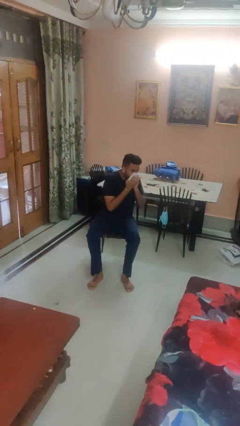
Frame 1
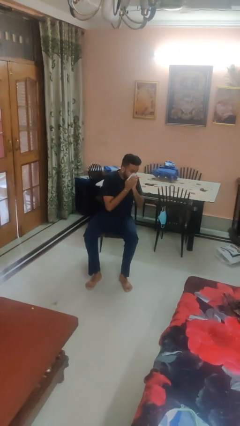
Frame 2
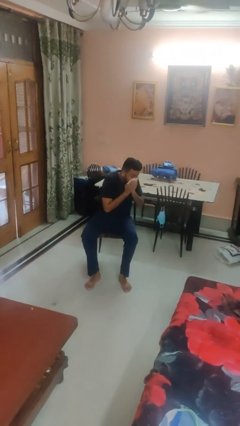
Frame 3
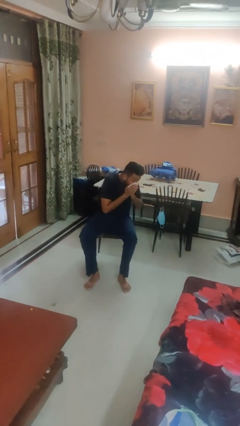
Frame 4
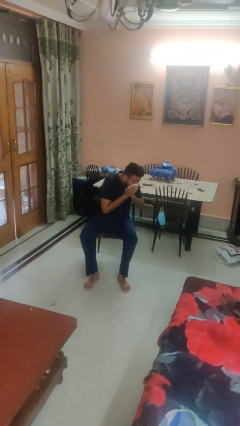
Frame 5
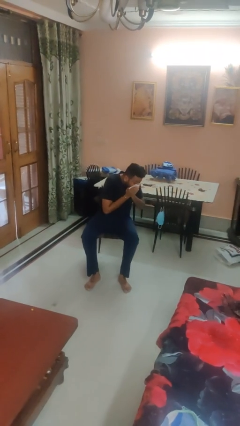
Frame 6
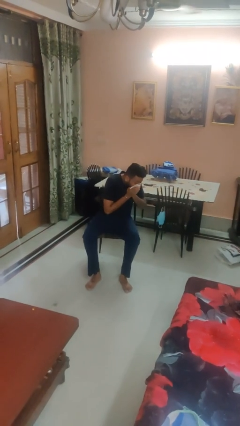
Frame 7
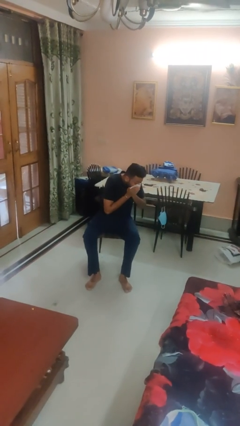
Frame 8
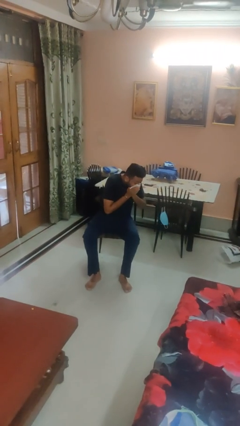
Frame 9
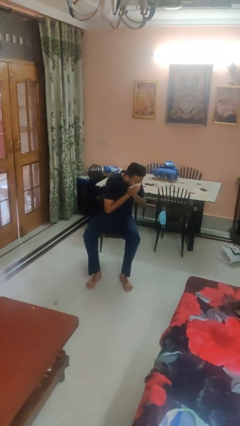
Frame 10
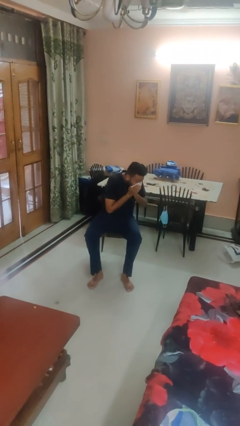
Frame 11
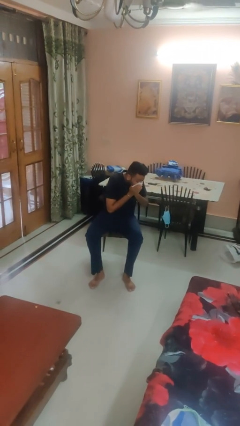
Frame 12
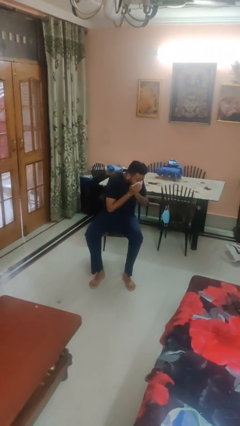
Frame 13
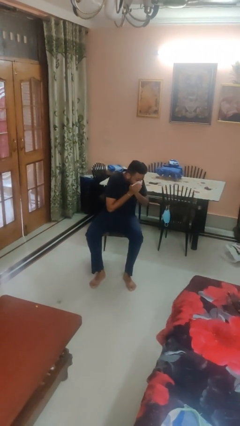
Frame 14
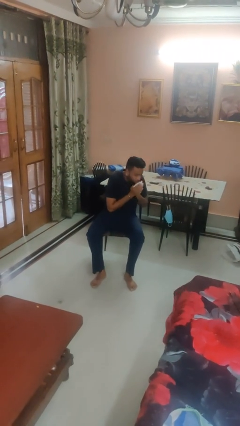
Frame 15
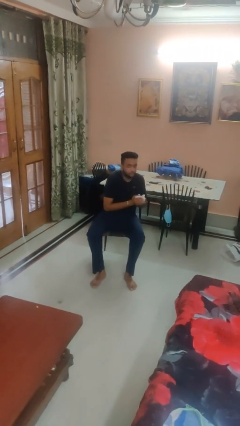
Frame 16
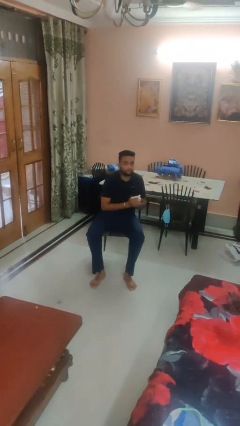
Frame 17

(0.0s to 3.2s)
person blows nose

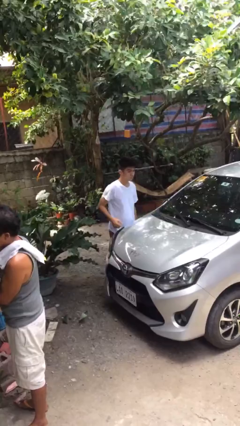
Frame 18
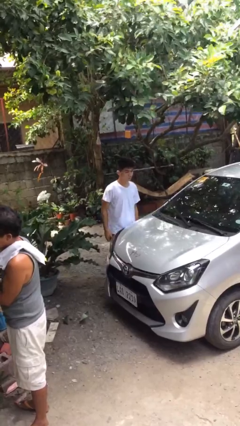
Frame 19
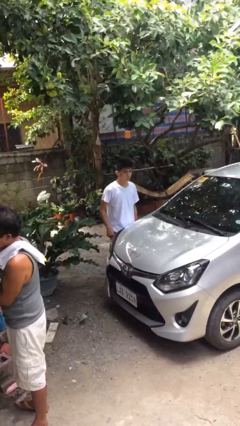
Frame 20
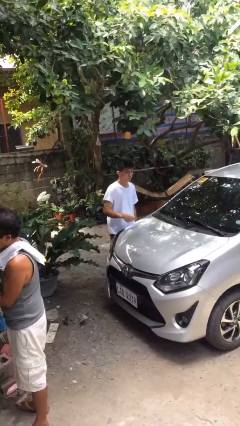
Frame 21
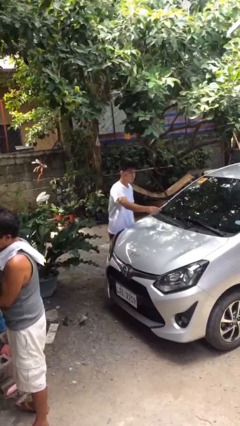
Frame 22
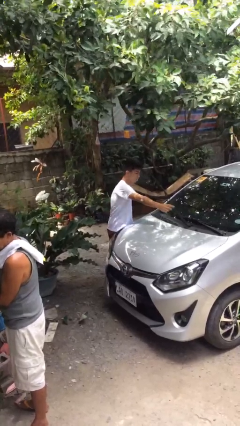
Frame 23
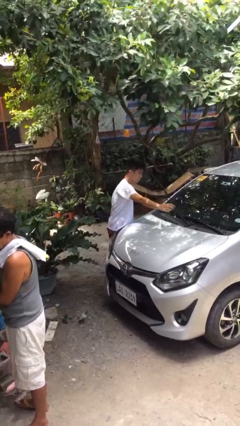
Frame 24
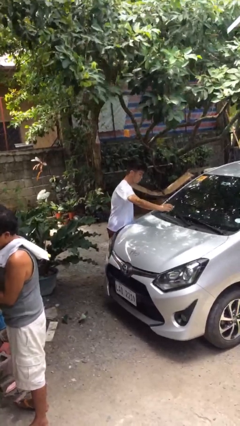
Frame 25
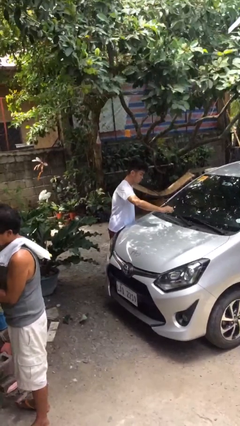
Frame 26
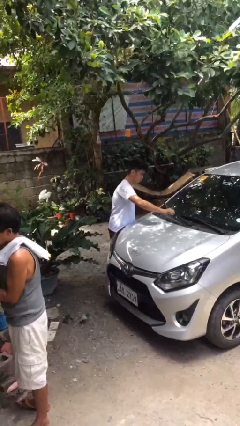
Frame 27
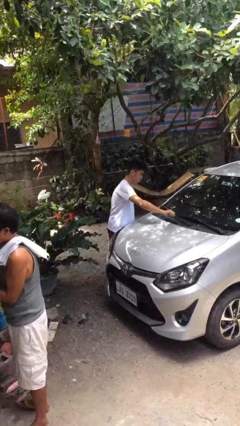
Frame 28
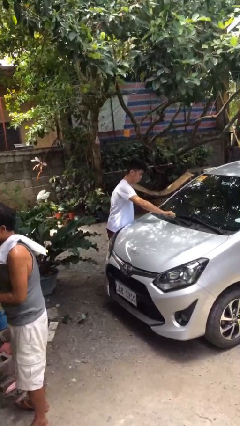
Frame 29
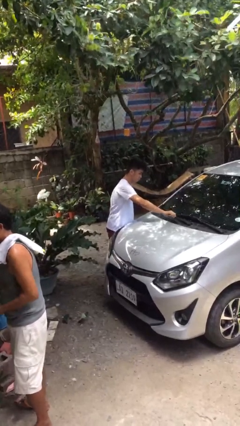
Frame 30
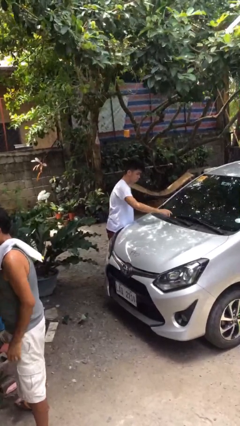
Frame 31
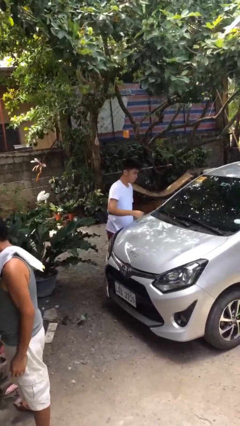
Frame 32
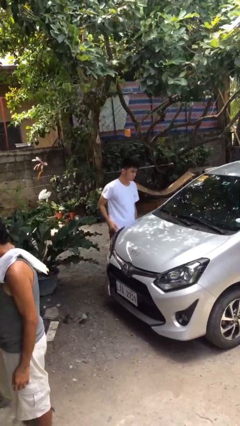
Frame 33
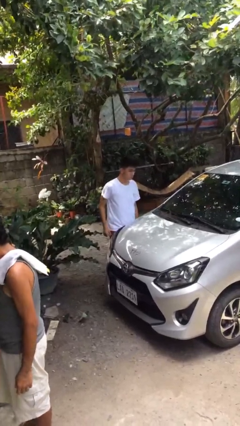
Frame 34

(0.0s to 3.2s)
person flips down car wipers

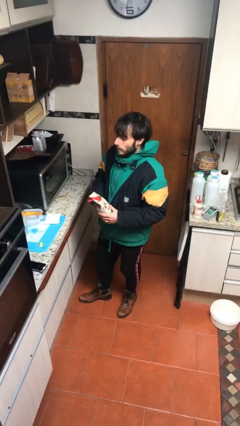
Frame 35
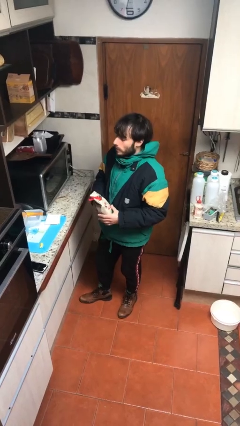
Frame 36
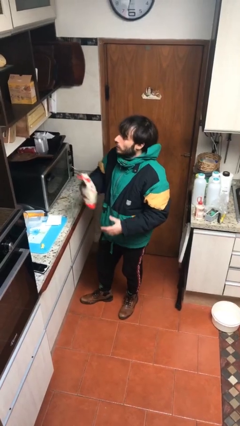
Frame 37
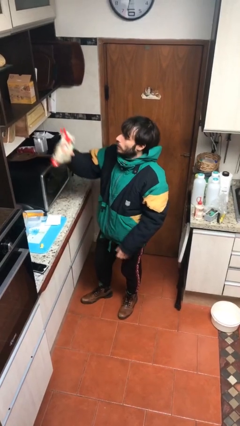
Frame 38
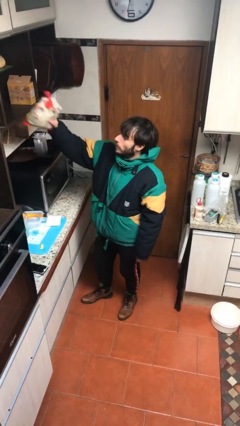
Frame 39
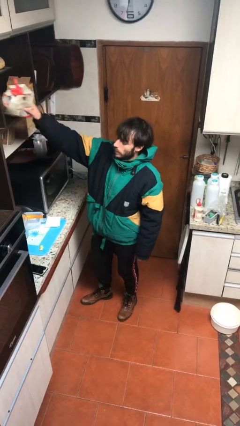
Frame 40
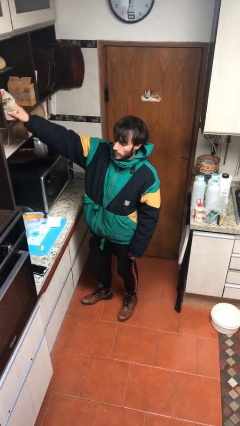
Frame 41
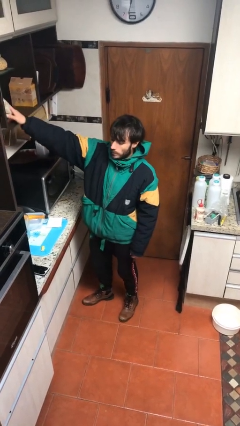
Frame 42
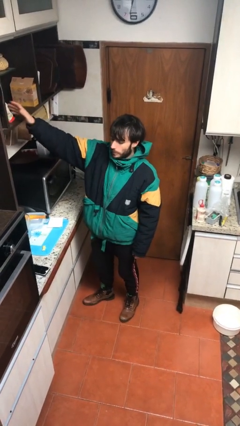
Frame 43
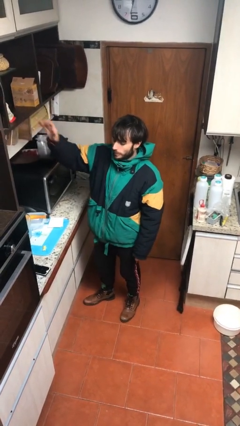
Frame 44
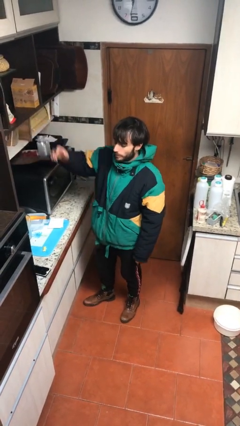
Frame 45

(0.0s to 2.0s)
person puts down object into cabinet

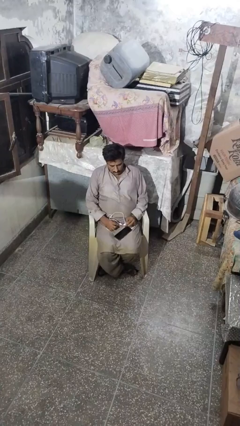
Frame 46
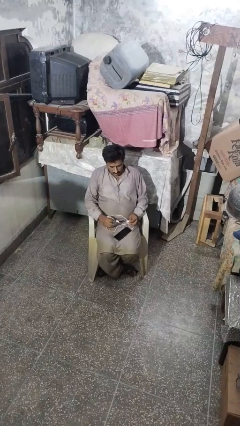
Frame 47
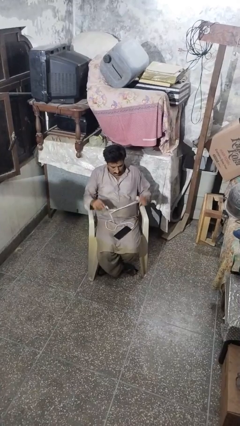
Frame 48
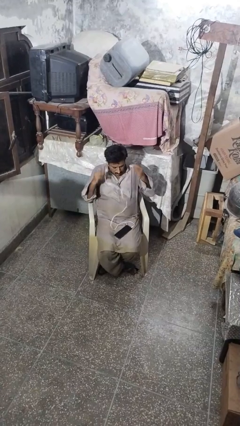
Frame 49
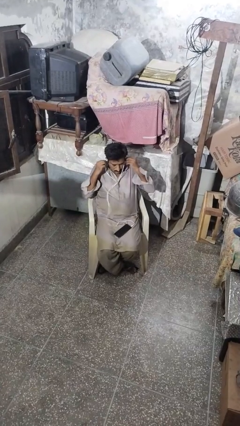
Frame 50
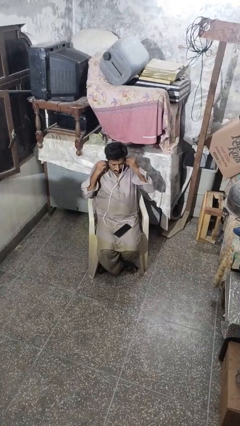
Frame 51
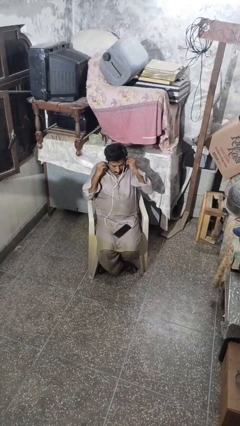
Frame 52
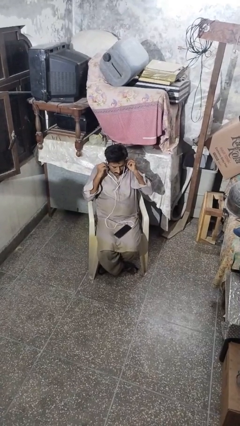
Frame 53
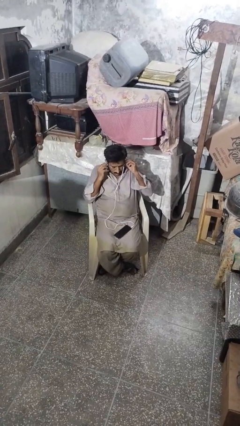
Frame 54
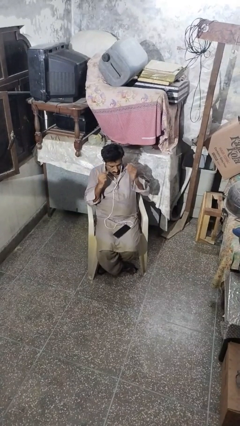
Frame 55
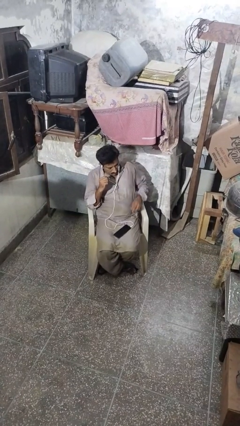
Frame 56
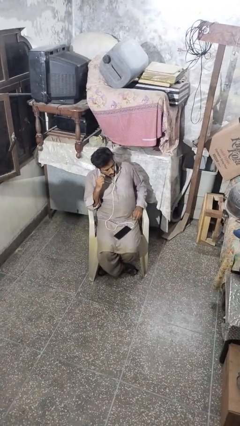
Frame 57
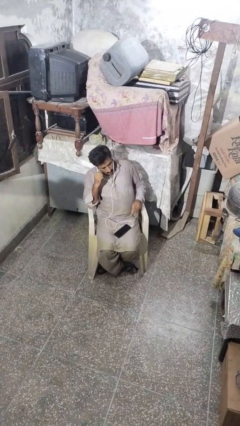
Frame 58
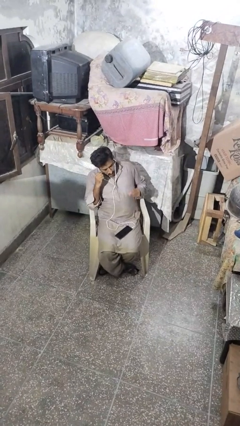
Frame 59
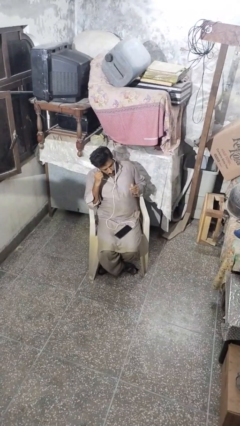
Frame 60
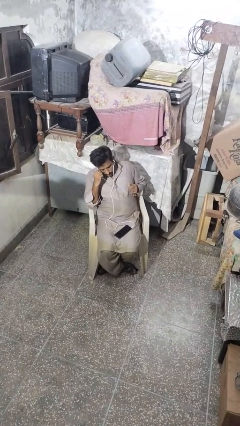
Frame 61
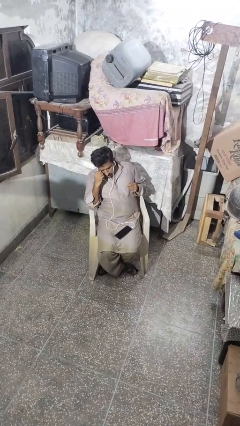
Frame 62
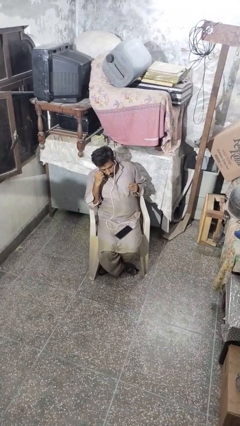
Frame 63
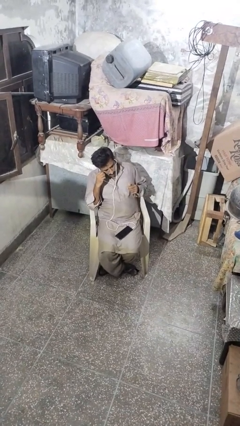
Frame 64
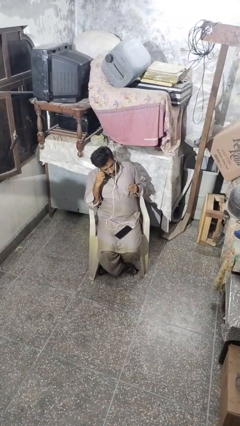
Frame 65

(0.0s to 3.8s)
person puts on headphones

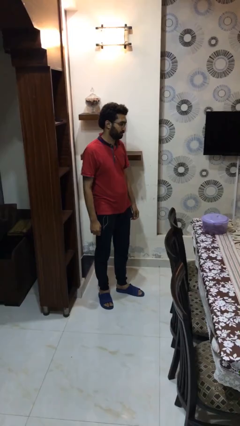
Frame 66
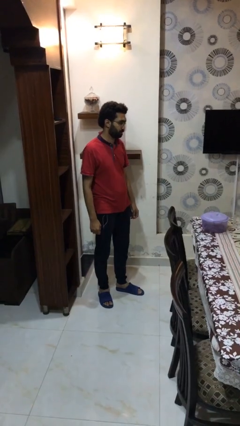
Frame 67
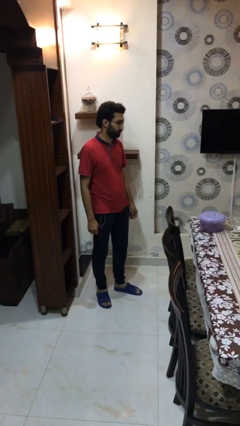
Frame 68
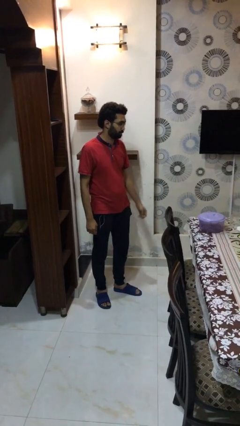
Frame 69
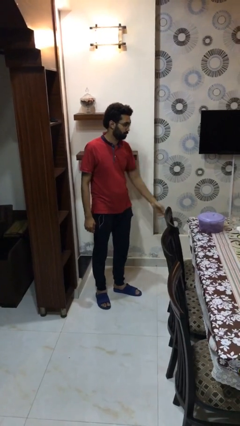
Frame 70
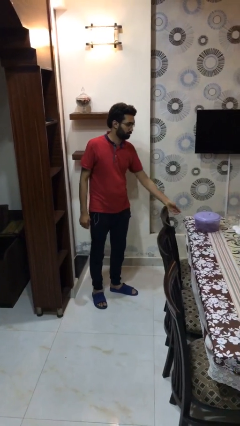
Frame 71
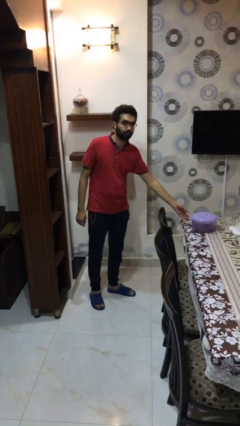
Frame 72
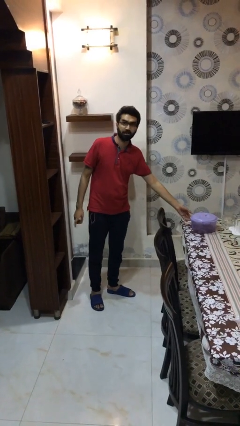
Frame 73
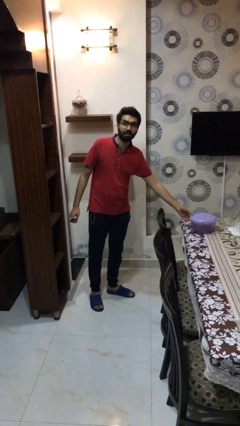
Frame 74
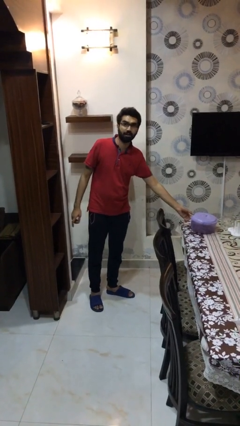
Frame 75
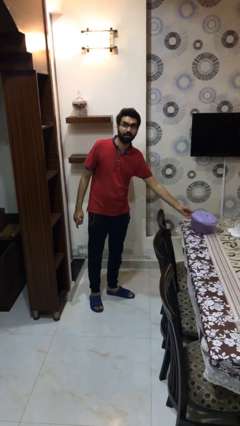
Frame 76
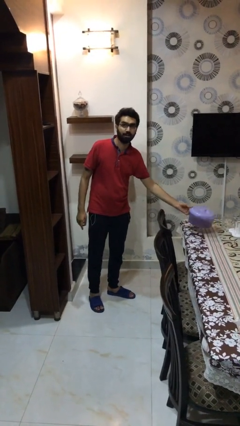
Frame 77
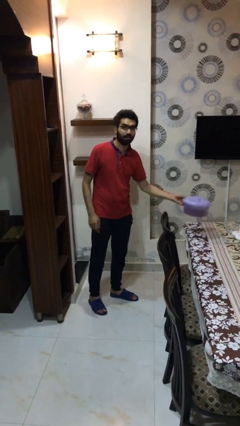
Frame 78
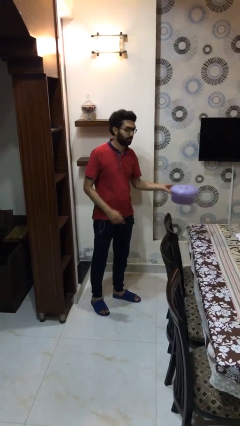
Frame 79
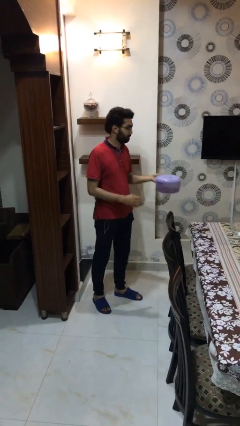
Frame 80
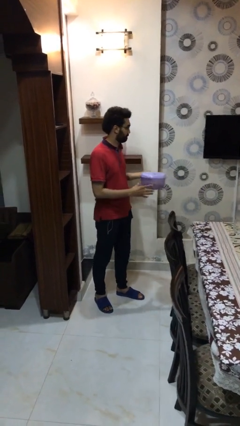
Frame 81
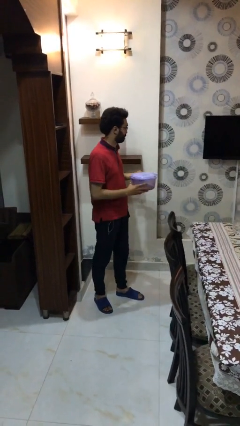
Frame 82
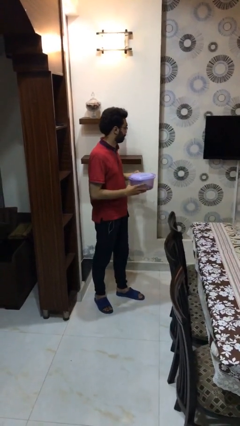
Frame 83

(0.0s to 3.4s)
person picks up object from table

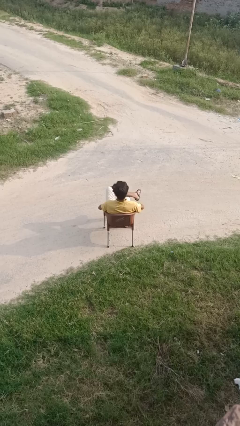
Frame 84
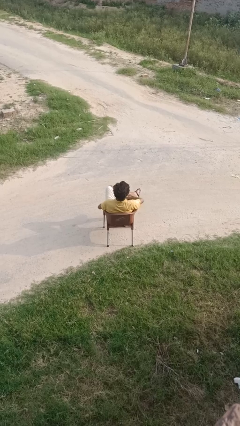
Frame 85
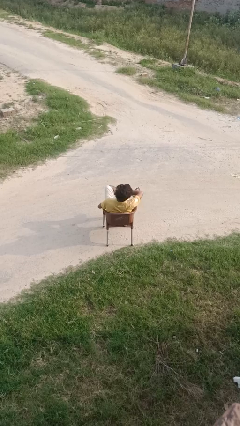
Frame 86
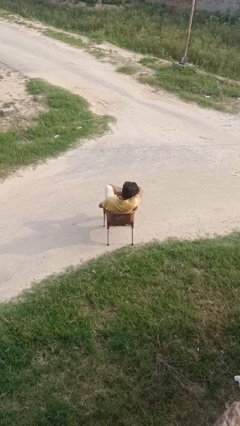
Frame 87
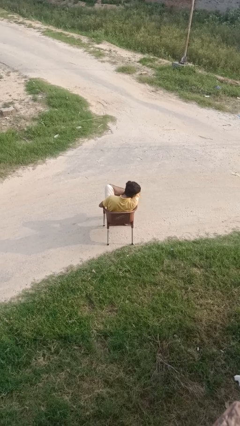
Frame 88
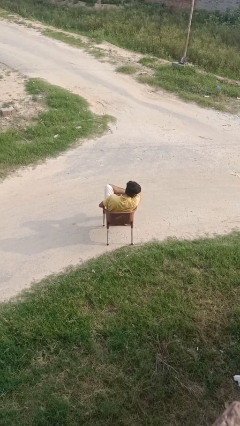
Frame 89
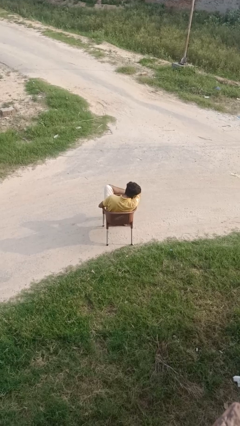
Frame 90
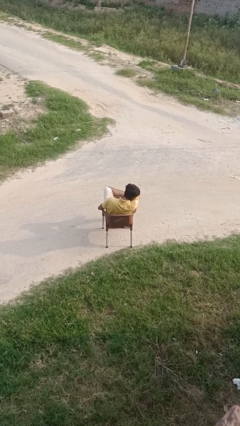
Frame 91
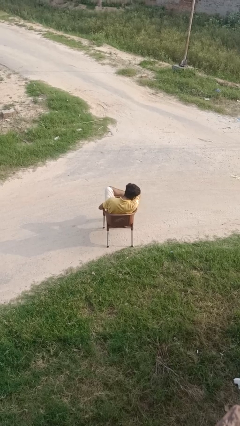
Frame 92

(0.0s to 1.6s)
person sneezes into arm

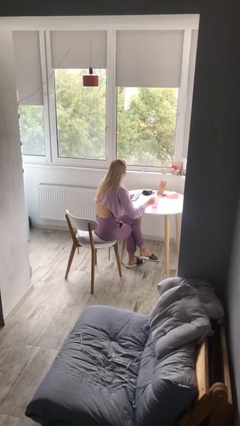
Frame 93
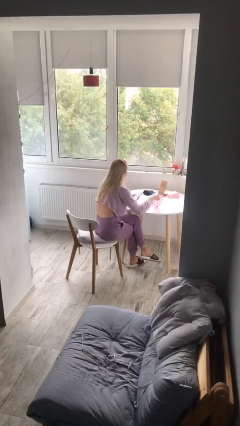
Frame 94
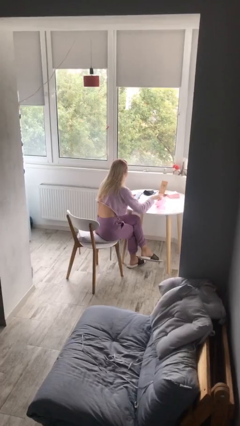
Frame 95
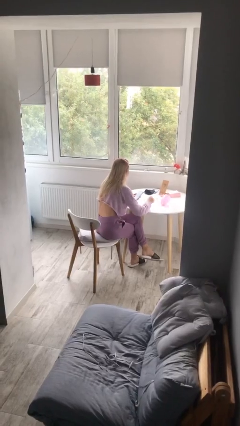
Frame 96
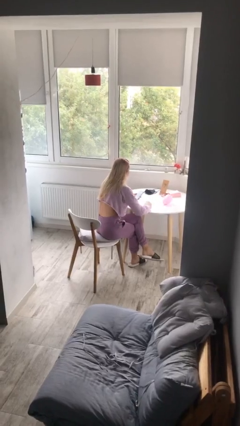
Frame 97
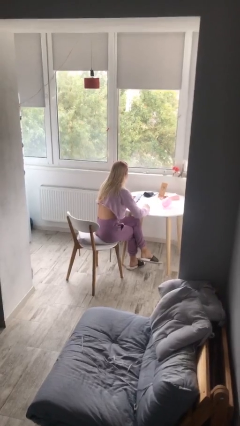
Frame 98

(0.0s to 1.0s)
person knocks over glass
